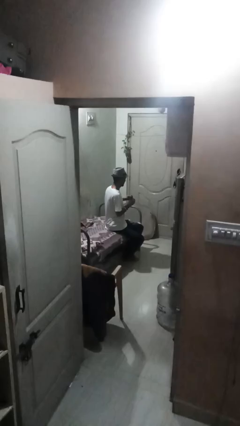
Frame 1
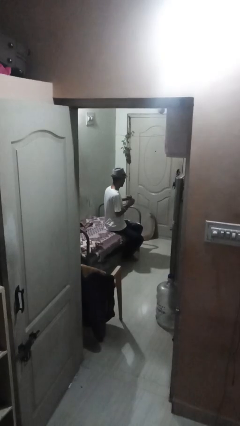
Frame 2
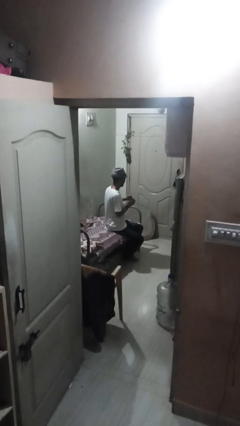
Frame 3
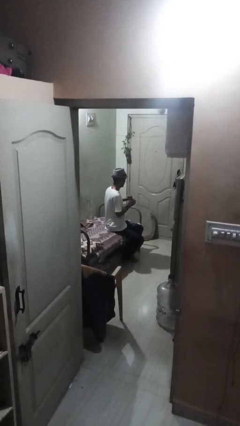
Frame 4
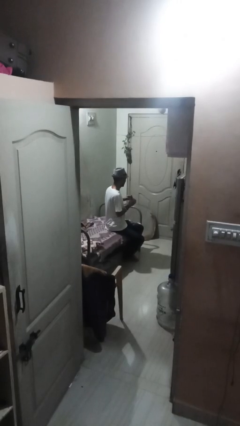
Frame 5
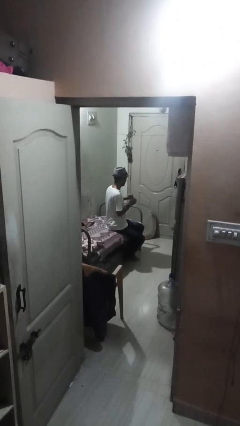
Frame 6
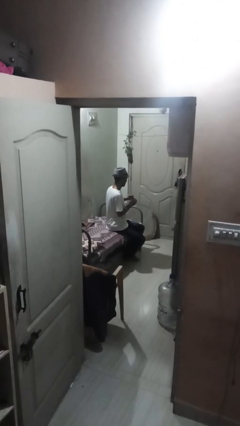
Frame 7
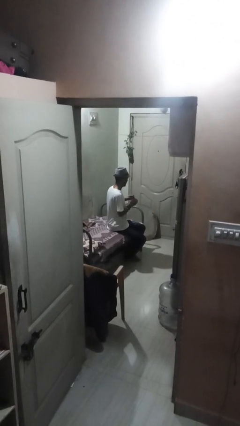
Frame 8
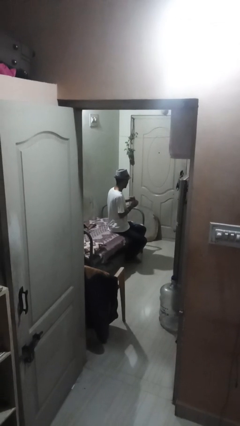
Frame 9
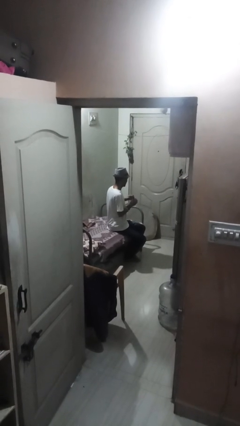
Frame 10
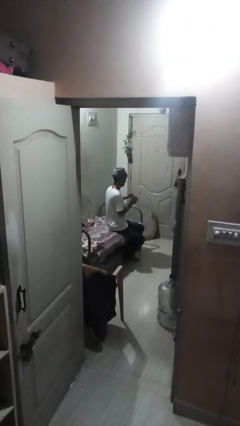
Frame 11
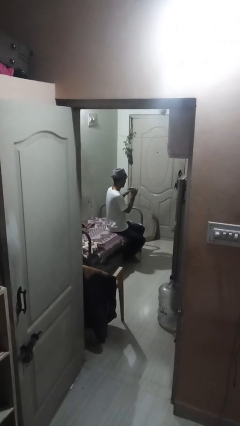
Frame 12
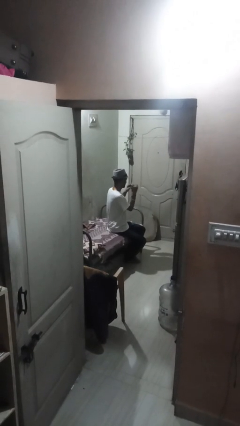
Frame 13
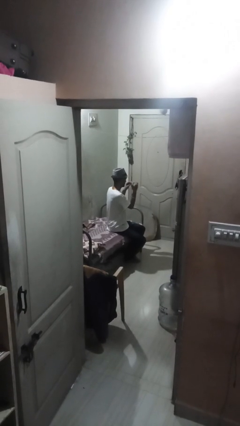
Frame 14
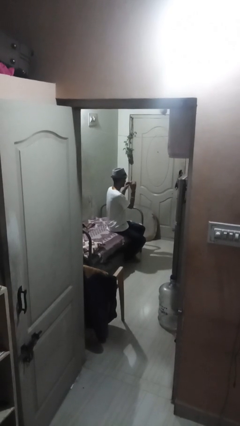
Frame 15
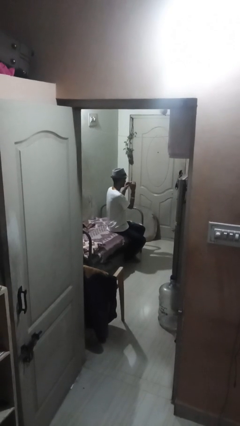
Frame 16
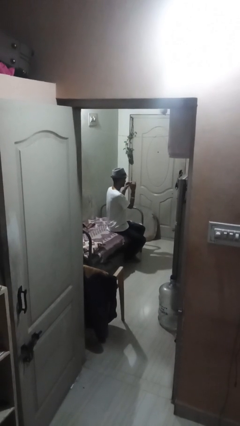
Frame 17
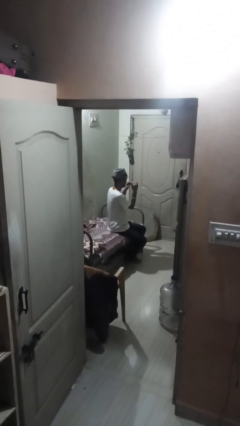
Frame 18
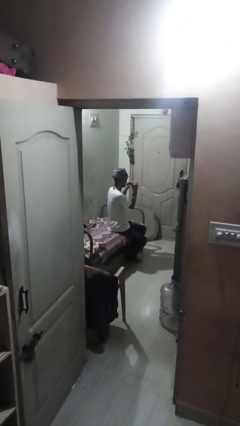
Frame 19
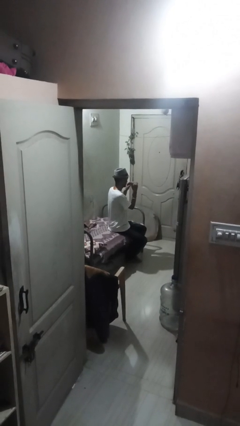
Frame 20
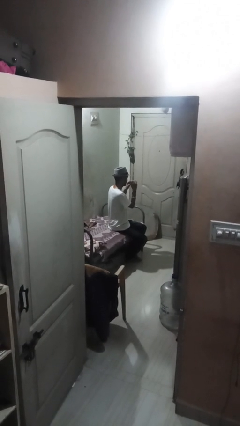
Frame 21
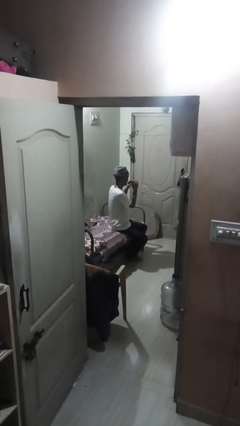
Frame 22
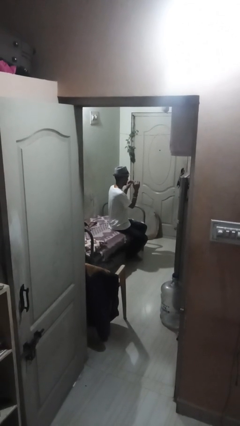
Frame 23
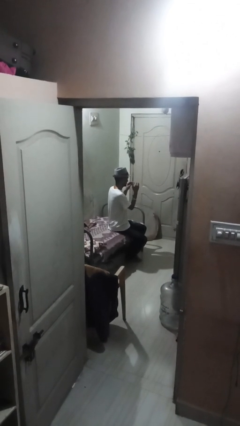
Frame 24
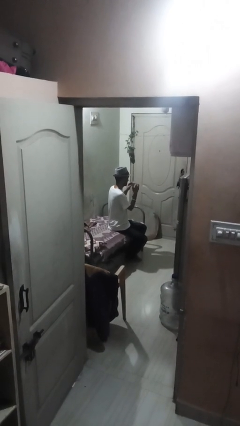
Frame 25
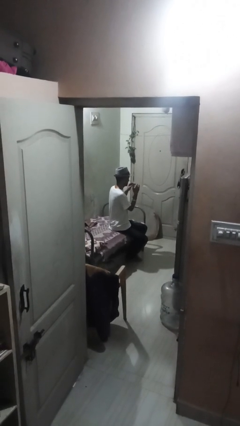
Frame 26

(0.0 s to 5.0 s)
person files fingernails

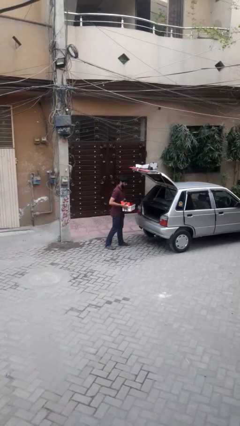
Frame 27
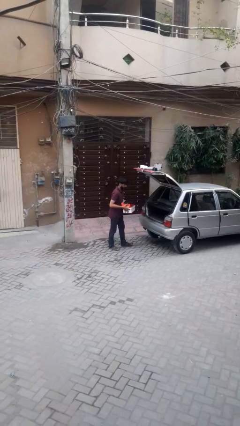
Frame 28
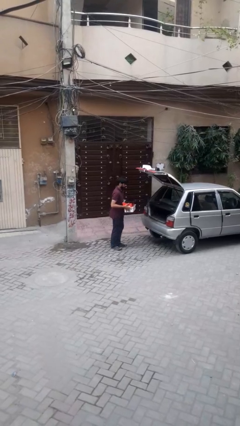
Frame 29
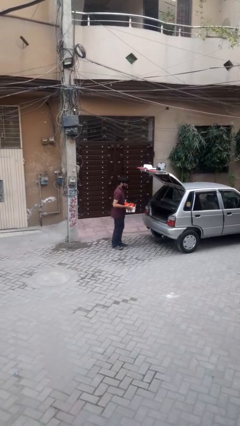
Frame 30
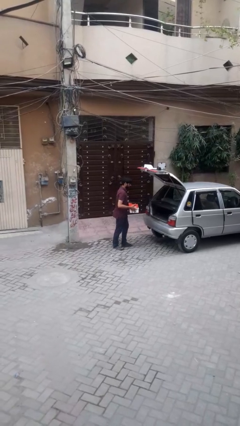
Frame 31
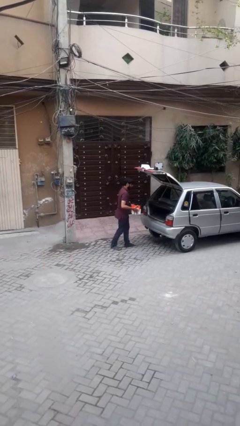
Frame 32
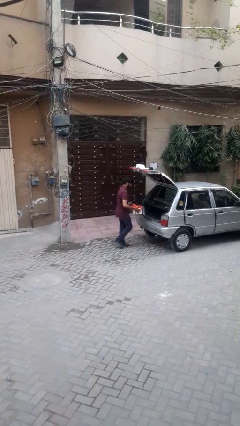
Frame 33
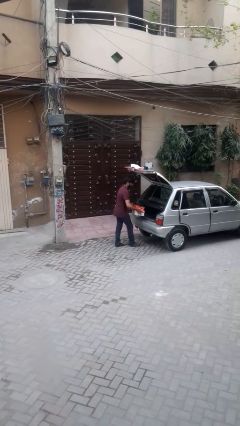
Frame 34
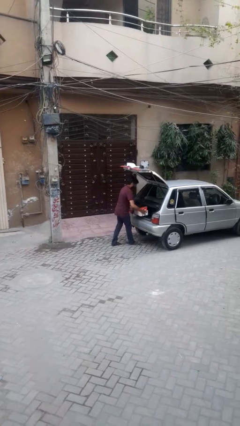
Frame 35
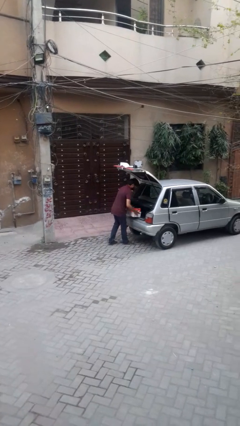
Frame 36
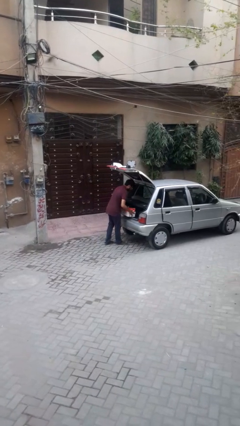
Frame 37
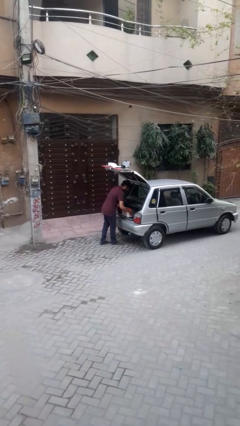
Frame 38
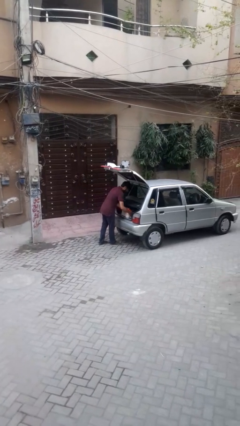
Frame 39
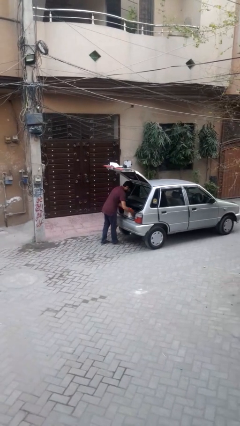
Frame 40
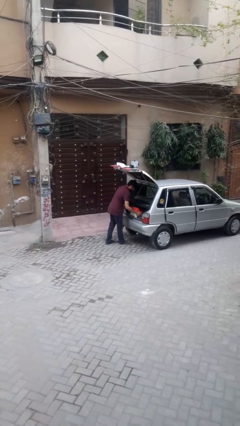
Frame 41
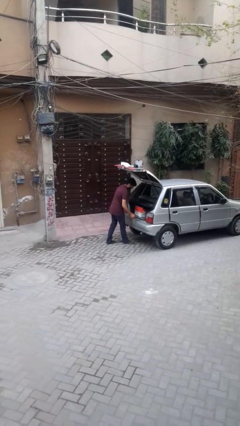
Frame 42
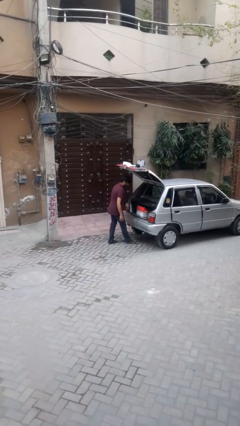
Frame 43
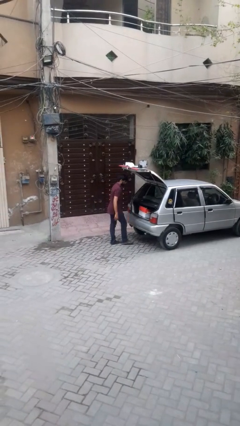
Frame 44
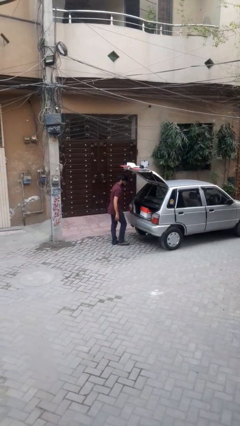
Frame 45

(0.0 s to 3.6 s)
person loads car

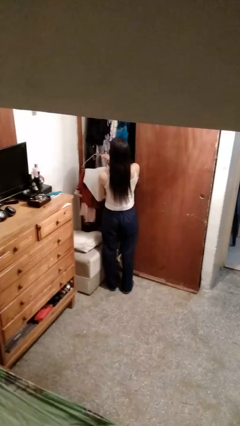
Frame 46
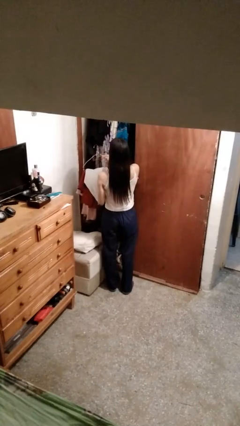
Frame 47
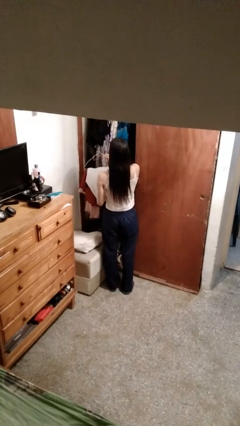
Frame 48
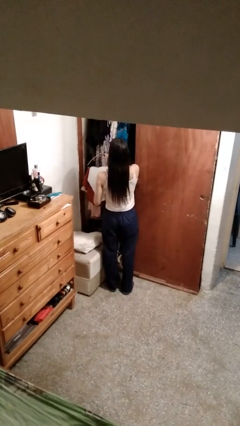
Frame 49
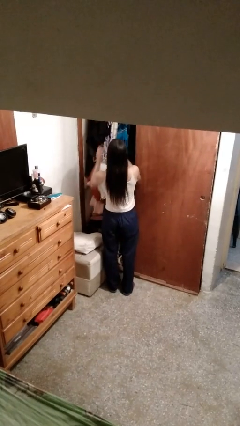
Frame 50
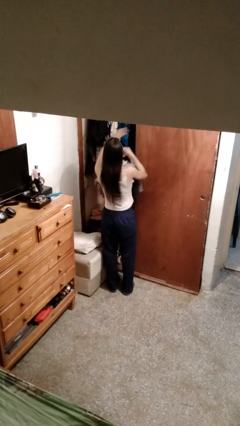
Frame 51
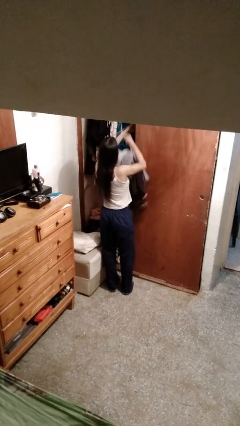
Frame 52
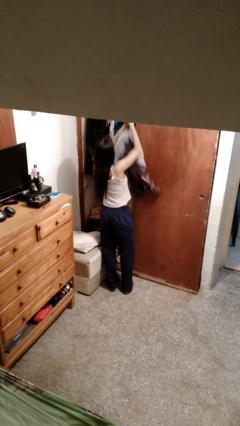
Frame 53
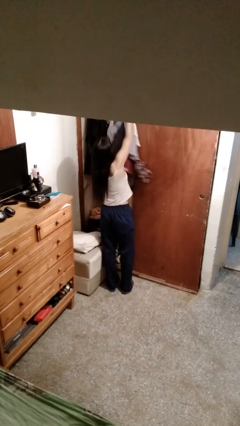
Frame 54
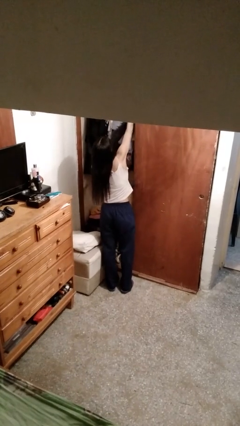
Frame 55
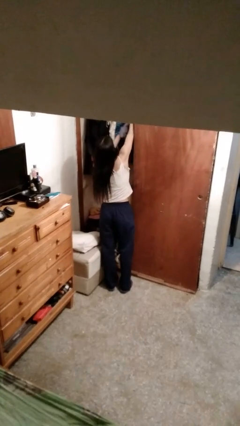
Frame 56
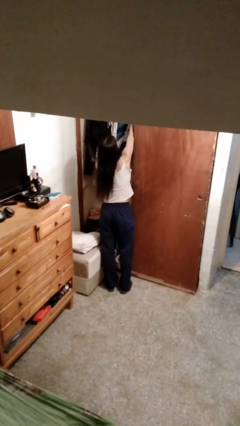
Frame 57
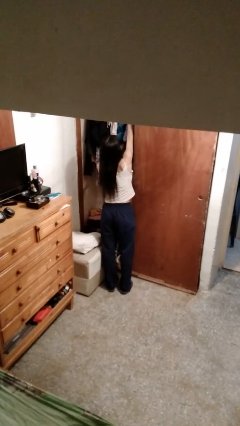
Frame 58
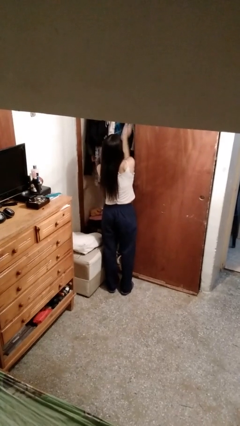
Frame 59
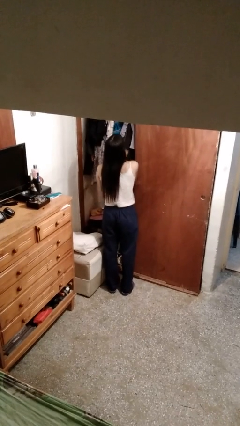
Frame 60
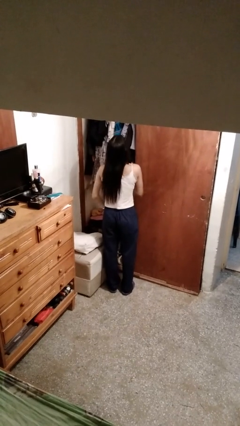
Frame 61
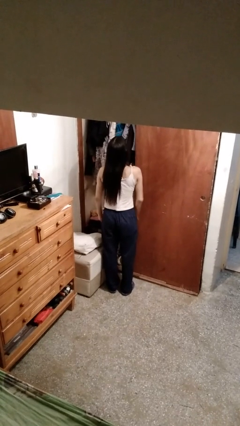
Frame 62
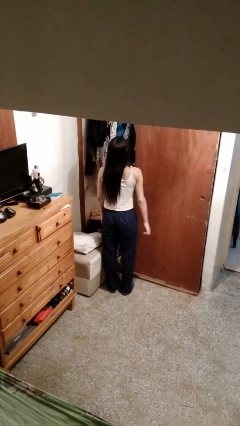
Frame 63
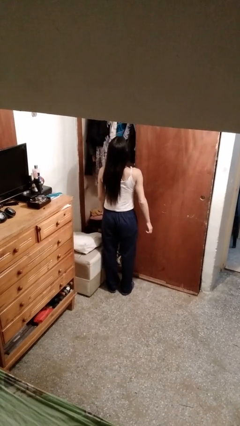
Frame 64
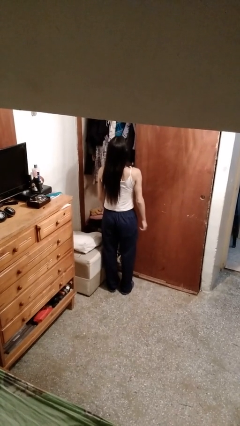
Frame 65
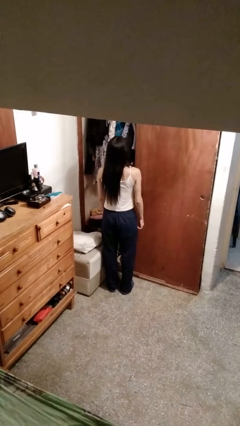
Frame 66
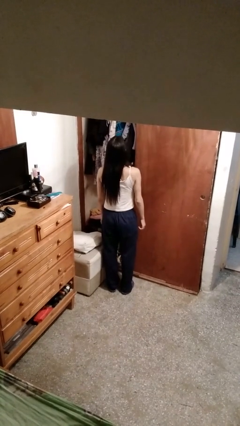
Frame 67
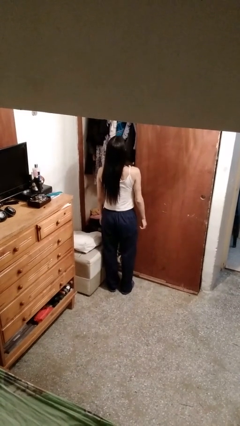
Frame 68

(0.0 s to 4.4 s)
person puts clothes into closet

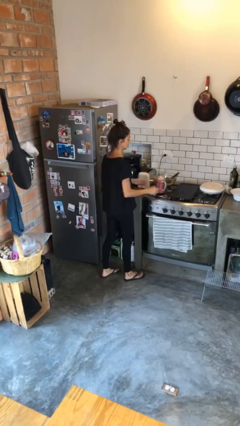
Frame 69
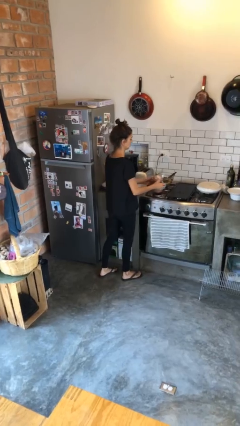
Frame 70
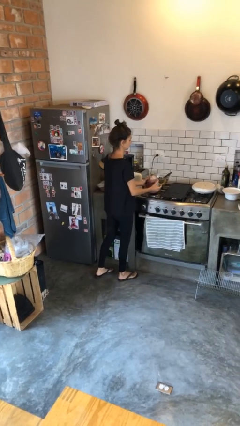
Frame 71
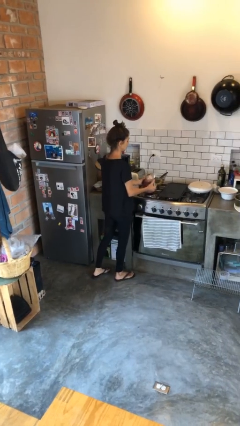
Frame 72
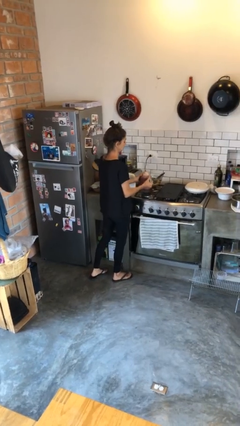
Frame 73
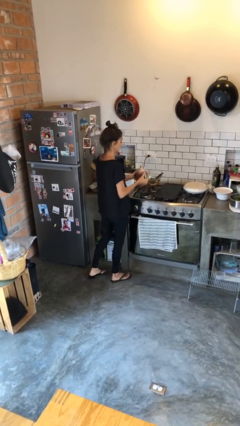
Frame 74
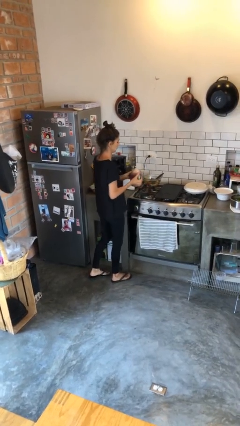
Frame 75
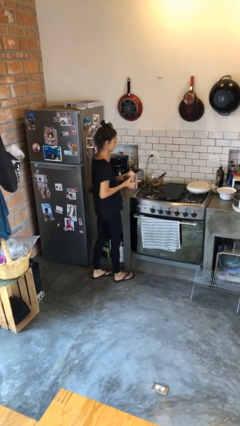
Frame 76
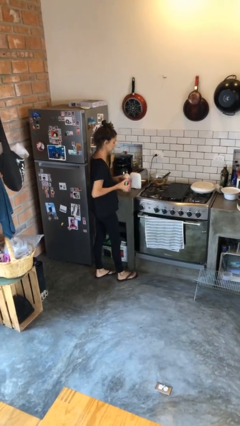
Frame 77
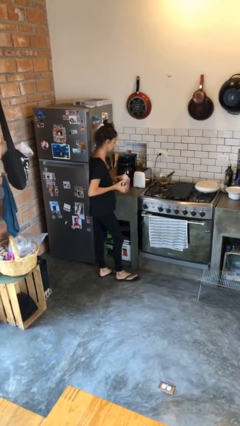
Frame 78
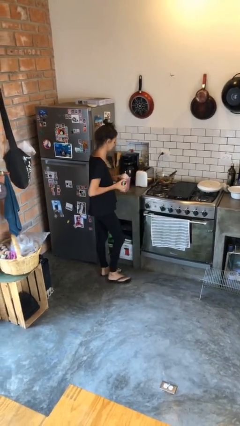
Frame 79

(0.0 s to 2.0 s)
person picks up object from countertop

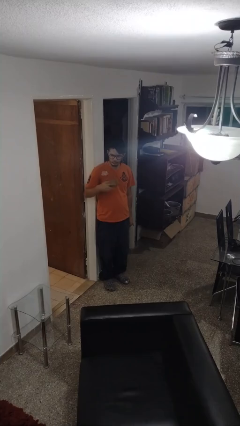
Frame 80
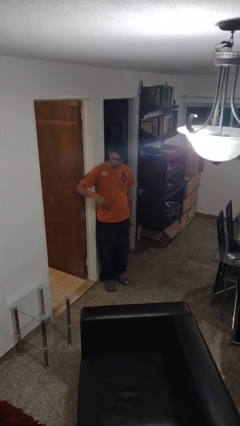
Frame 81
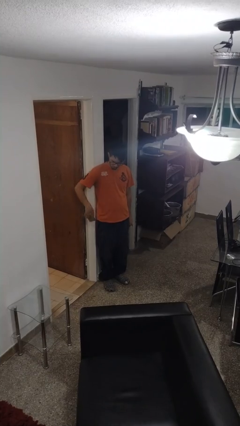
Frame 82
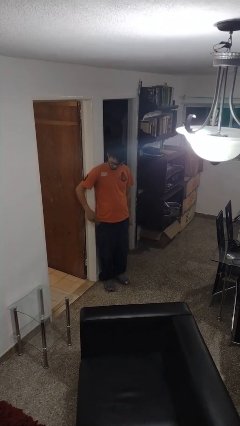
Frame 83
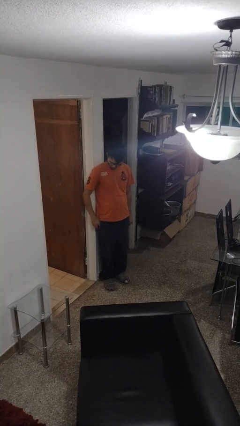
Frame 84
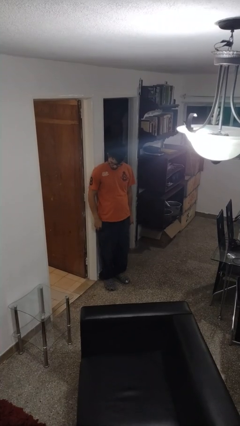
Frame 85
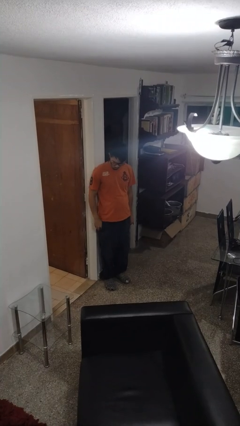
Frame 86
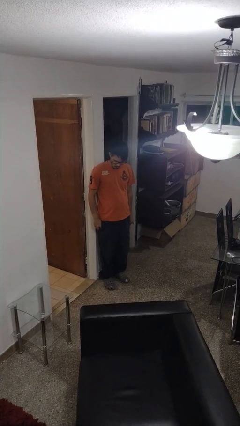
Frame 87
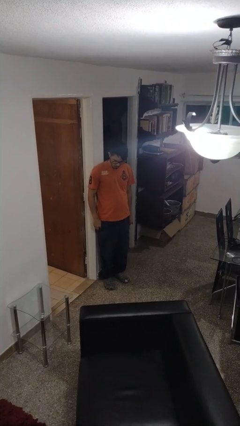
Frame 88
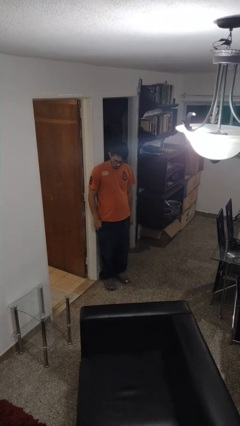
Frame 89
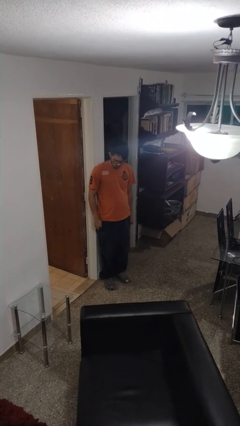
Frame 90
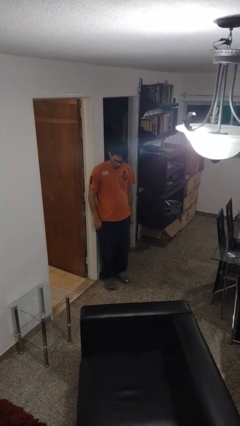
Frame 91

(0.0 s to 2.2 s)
person puts phone into pocket
